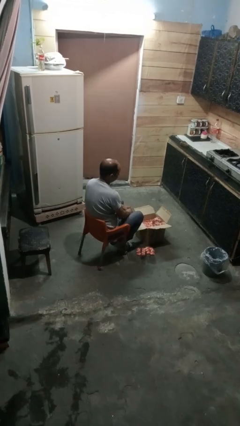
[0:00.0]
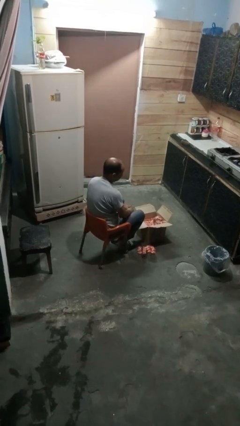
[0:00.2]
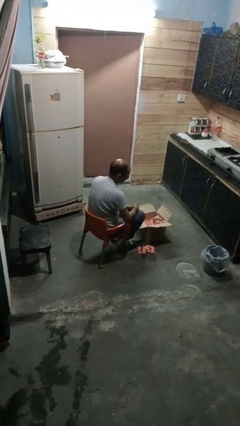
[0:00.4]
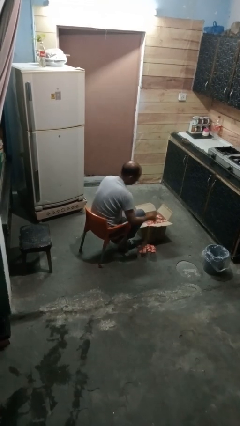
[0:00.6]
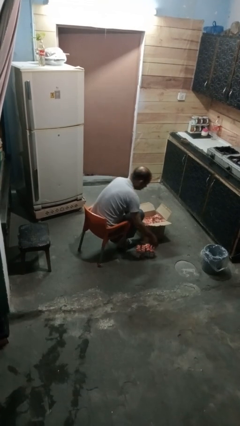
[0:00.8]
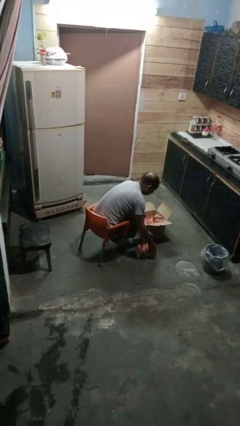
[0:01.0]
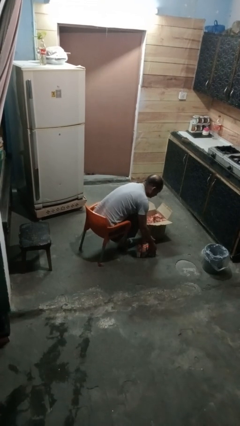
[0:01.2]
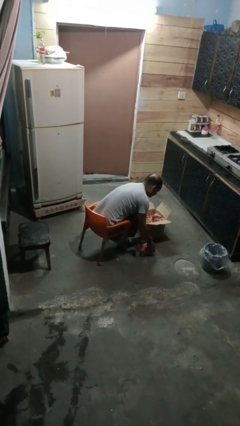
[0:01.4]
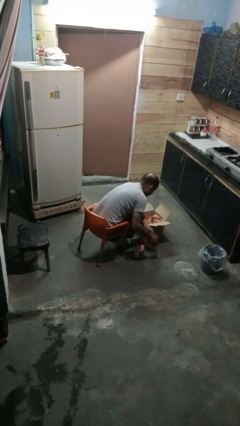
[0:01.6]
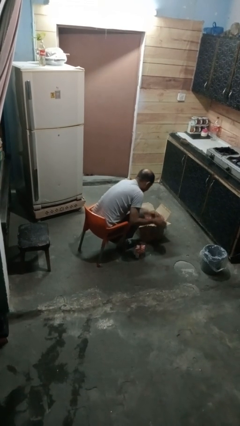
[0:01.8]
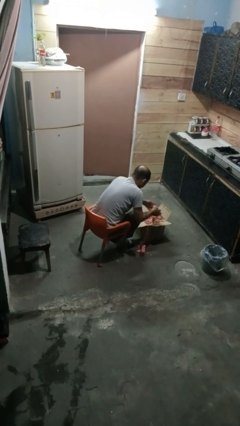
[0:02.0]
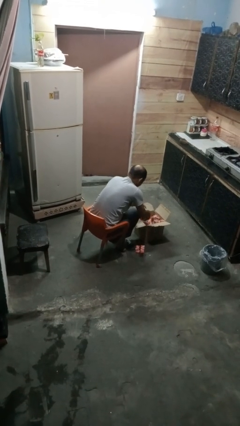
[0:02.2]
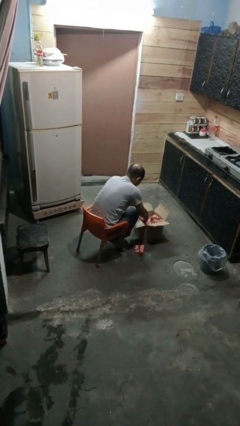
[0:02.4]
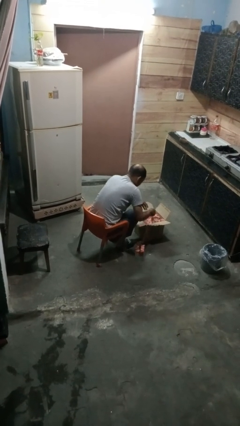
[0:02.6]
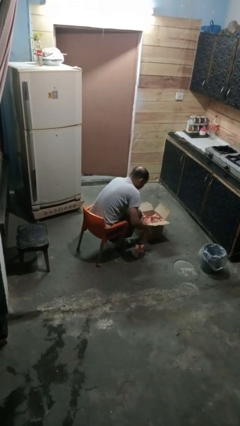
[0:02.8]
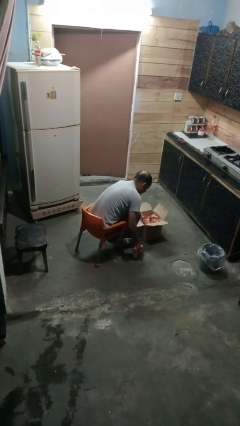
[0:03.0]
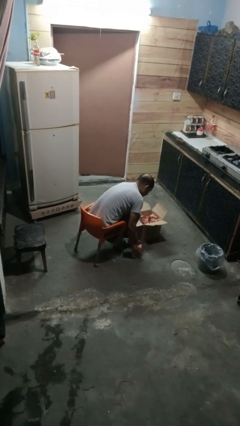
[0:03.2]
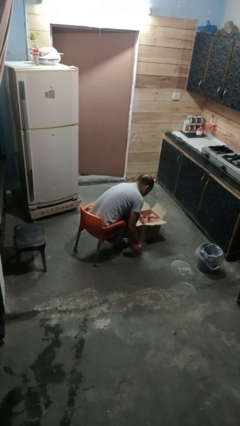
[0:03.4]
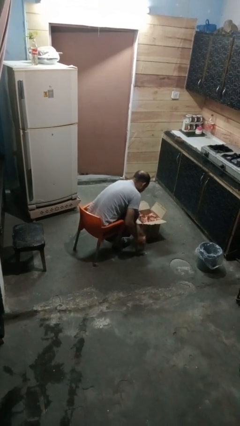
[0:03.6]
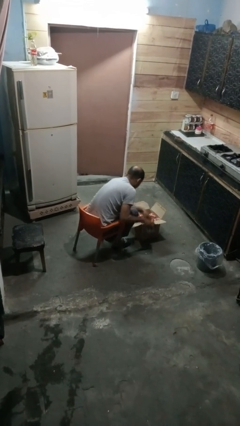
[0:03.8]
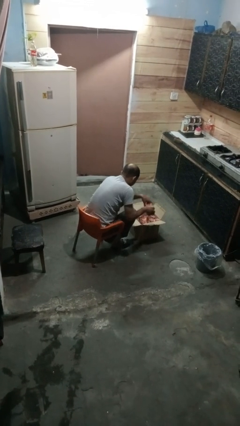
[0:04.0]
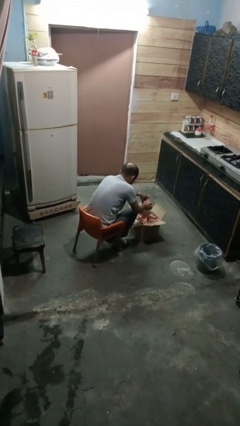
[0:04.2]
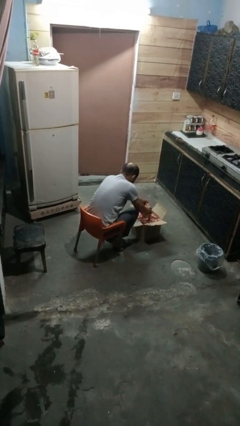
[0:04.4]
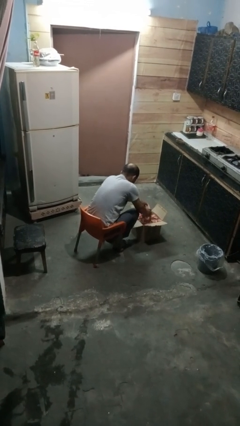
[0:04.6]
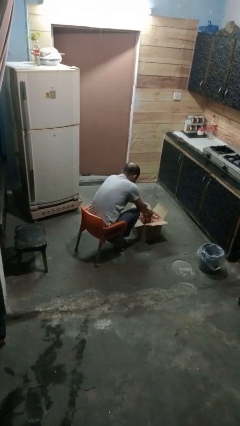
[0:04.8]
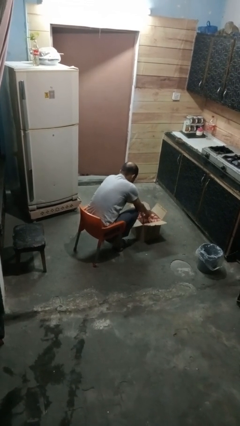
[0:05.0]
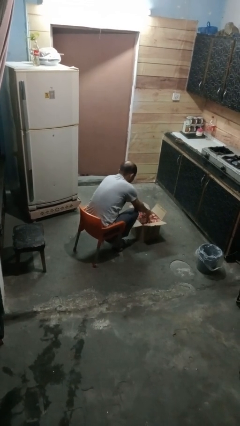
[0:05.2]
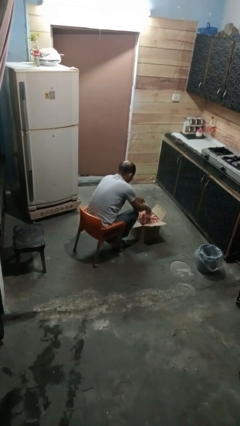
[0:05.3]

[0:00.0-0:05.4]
person puts object into box

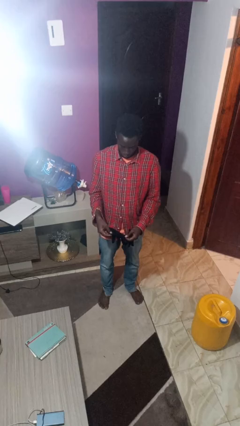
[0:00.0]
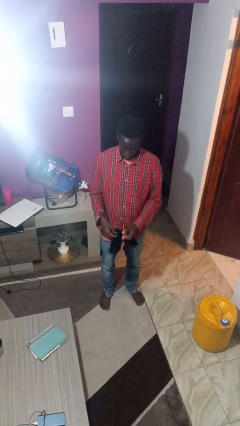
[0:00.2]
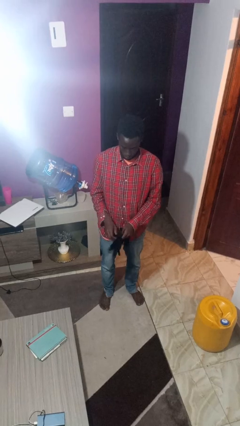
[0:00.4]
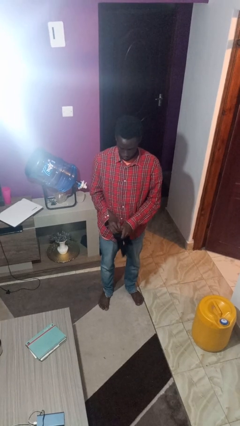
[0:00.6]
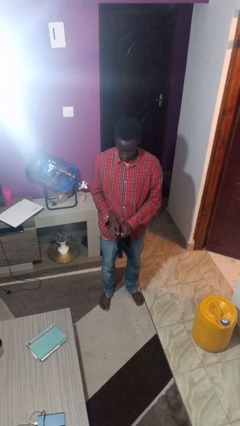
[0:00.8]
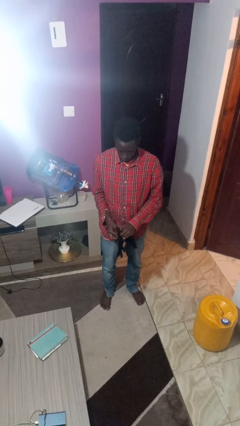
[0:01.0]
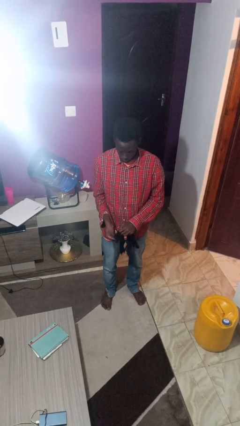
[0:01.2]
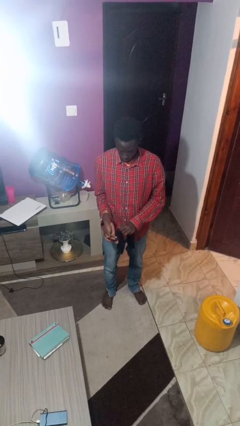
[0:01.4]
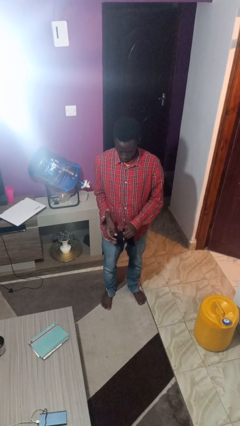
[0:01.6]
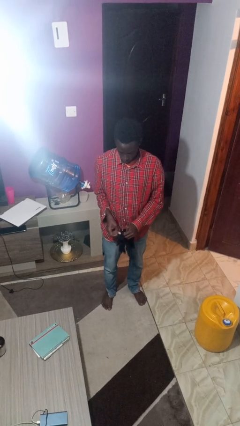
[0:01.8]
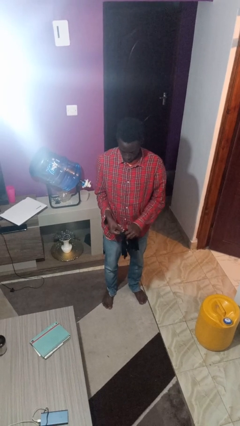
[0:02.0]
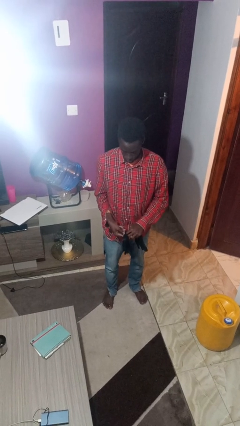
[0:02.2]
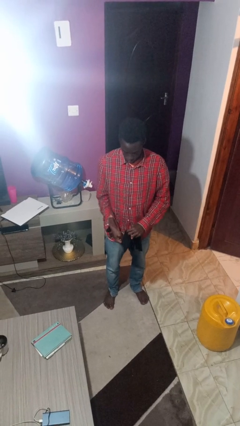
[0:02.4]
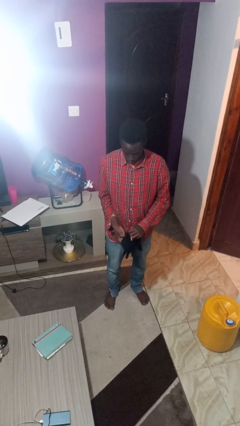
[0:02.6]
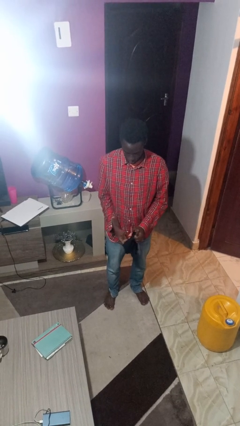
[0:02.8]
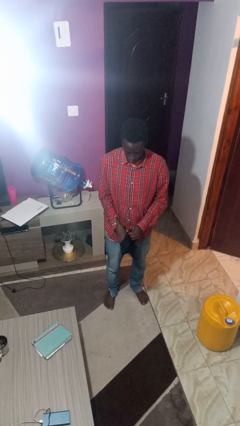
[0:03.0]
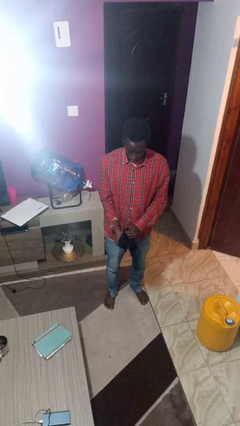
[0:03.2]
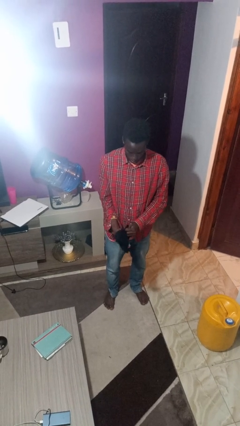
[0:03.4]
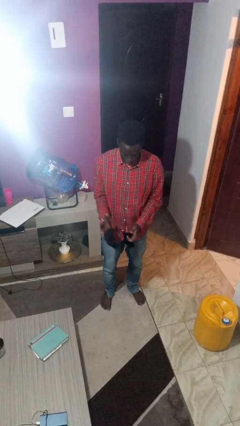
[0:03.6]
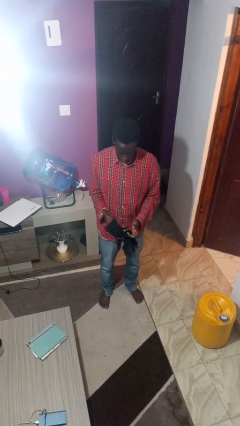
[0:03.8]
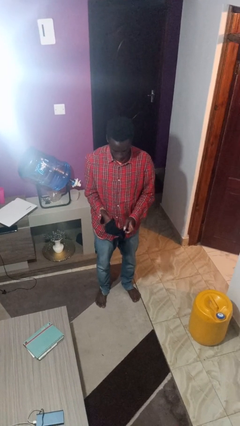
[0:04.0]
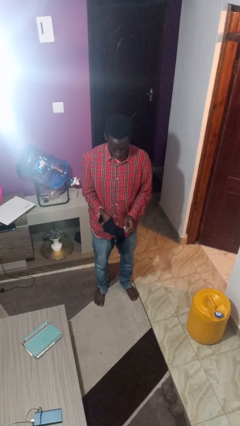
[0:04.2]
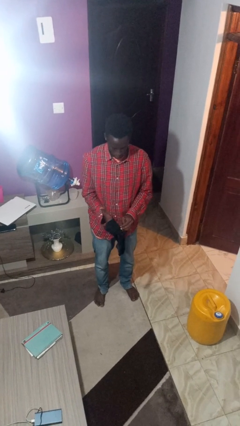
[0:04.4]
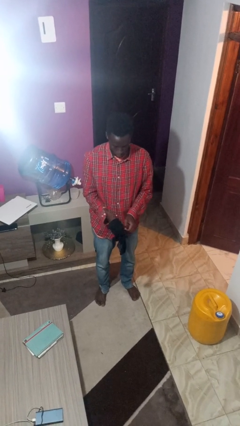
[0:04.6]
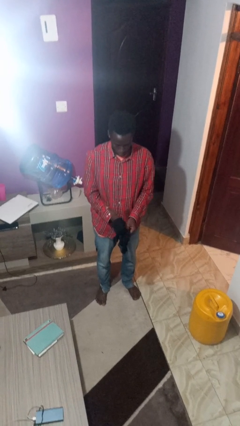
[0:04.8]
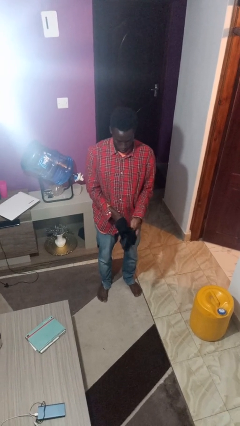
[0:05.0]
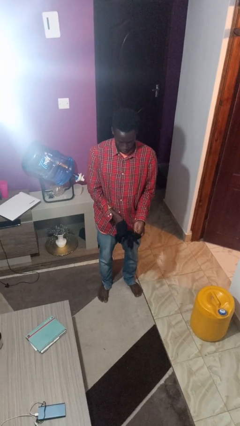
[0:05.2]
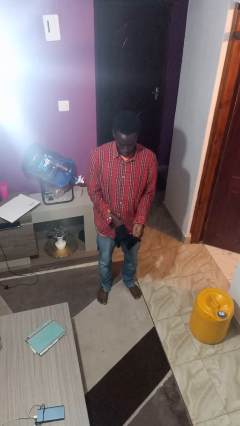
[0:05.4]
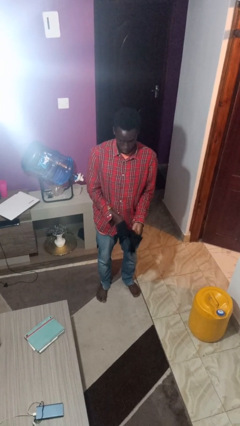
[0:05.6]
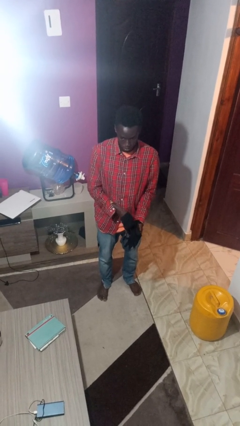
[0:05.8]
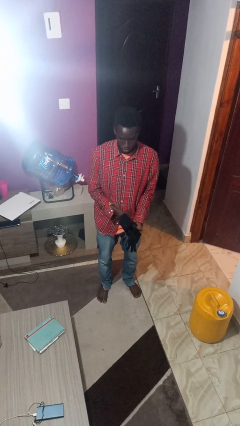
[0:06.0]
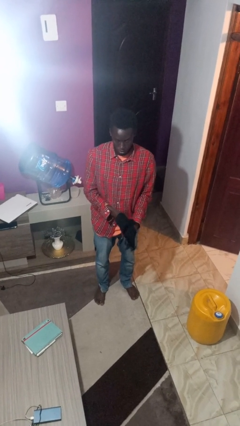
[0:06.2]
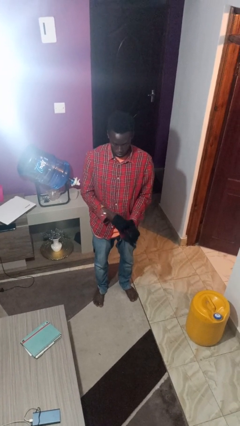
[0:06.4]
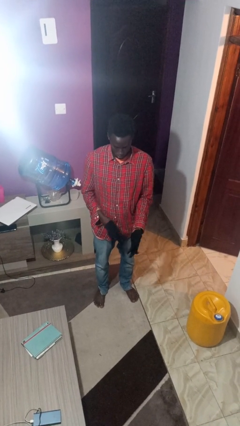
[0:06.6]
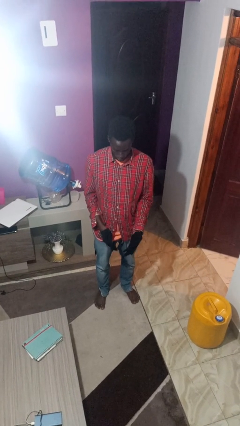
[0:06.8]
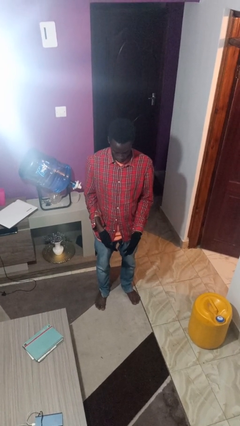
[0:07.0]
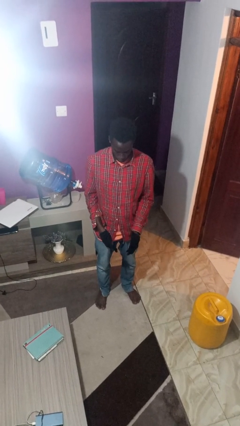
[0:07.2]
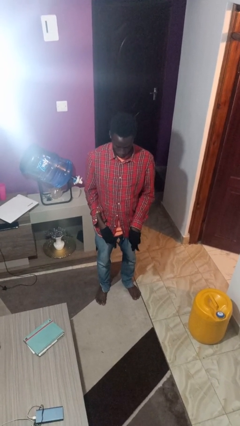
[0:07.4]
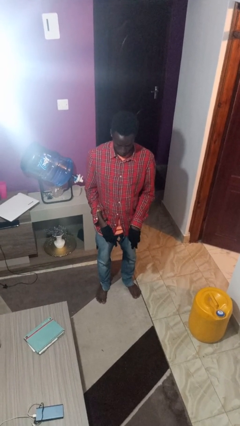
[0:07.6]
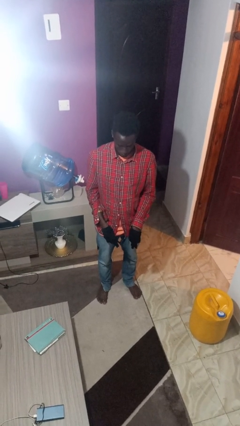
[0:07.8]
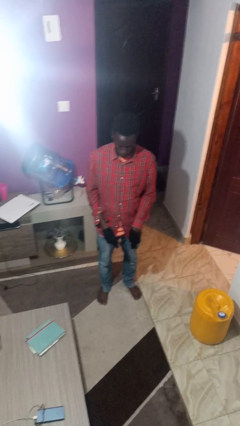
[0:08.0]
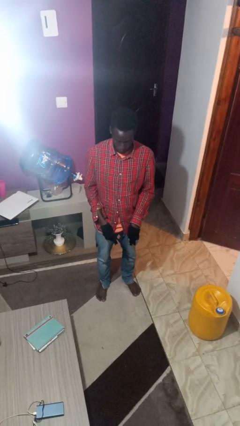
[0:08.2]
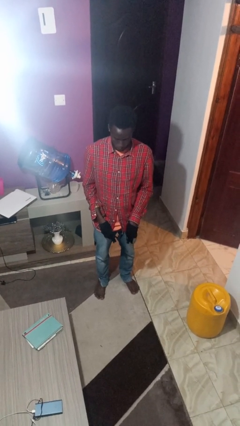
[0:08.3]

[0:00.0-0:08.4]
person puts on gloves

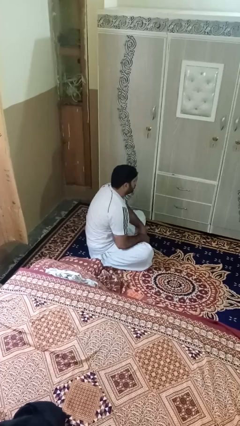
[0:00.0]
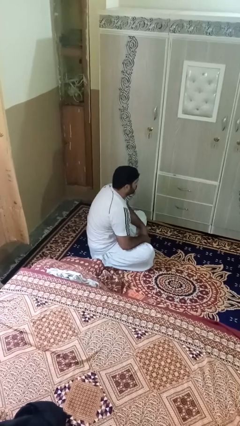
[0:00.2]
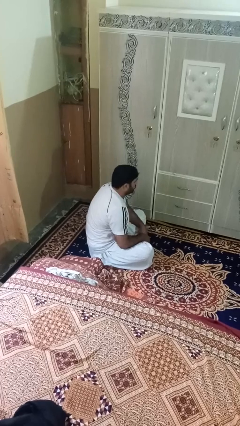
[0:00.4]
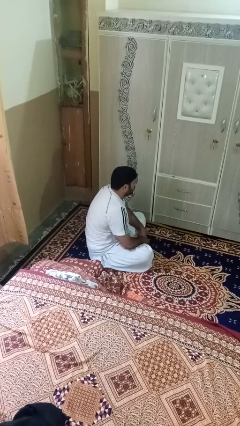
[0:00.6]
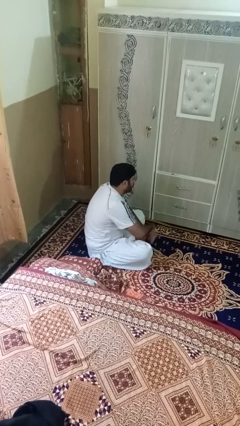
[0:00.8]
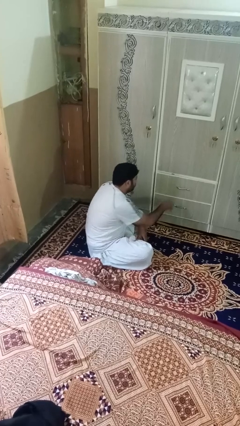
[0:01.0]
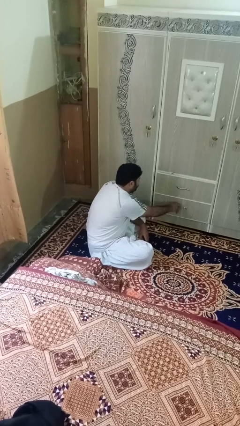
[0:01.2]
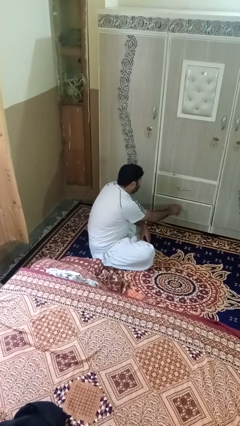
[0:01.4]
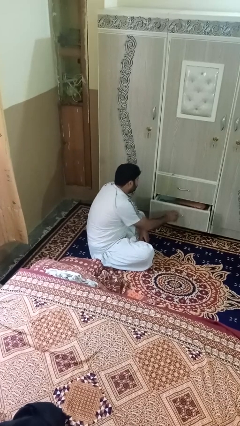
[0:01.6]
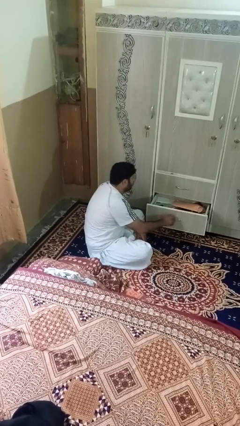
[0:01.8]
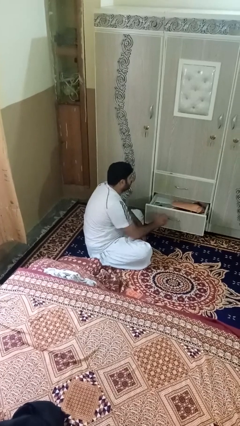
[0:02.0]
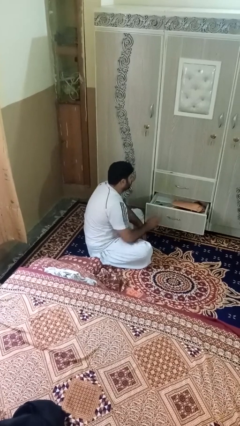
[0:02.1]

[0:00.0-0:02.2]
person opens dresser drawer

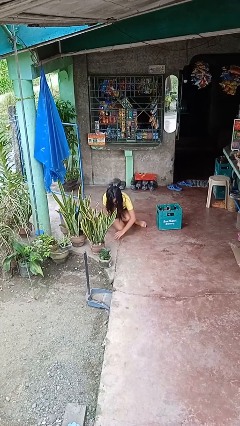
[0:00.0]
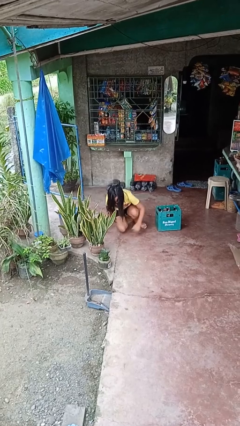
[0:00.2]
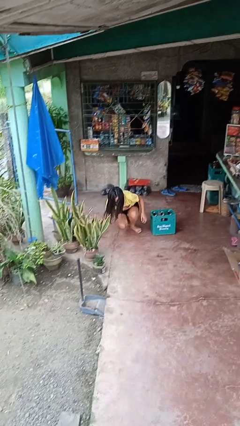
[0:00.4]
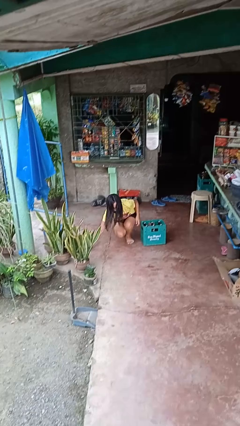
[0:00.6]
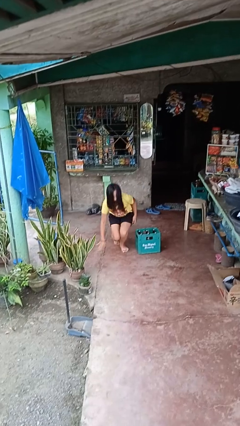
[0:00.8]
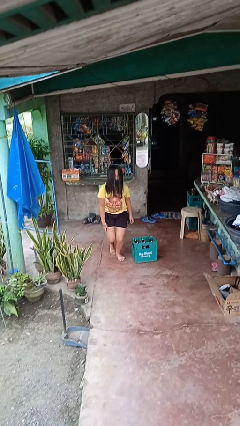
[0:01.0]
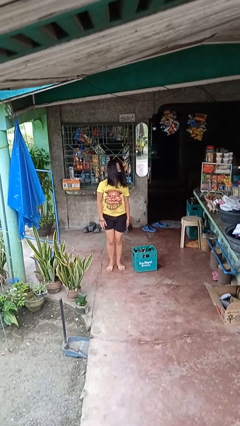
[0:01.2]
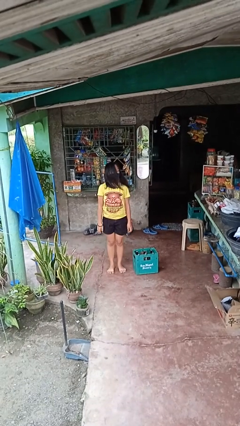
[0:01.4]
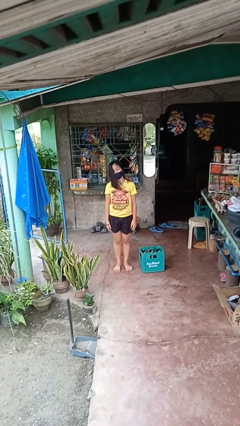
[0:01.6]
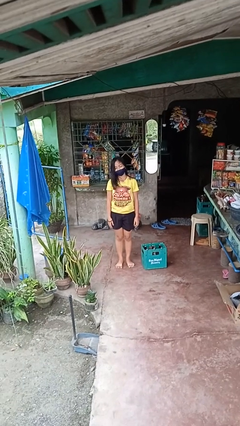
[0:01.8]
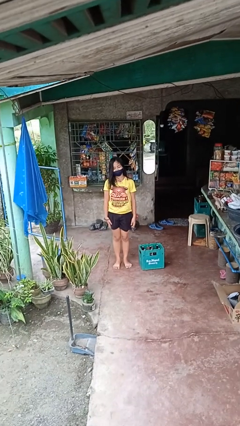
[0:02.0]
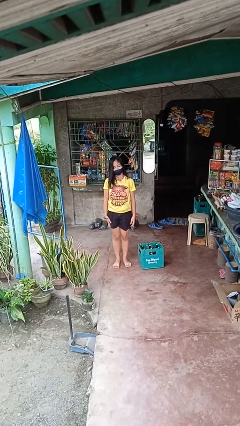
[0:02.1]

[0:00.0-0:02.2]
person stands up from floor
